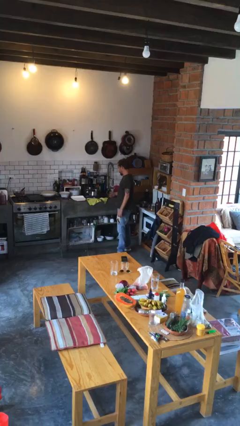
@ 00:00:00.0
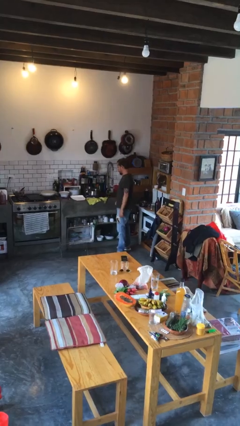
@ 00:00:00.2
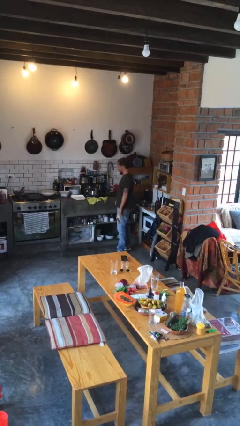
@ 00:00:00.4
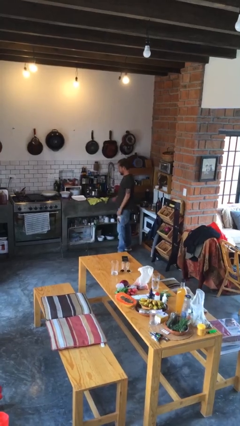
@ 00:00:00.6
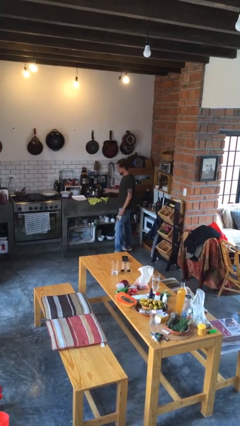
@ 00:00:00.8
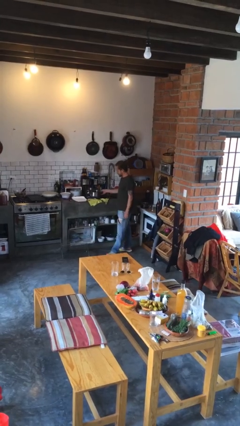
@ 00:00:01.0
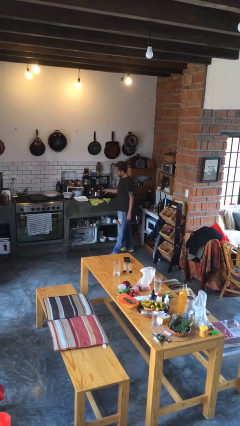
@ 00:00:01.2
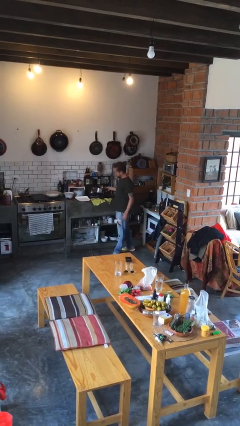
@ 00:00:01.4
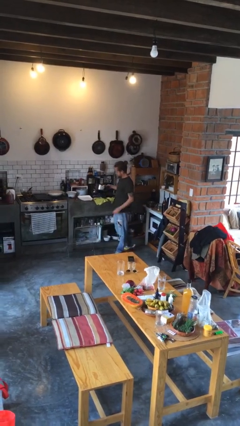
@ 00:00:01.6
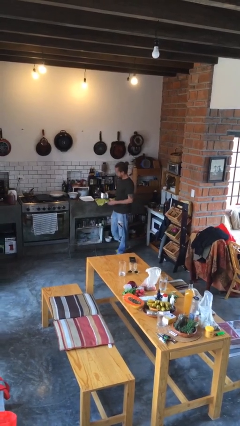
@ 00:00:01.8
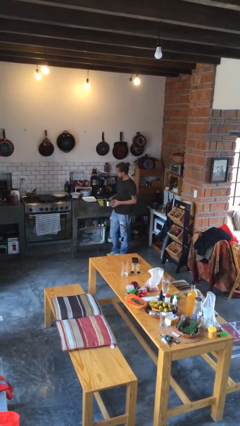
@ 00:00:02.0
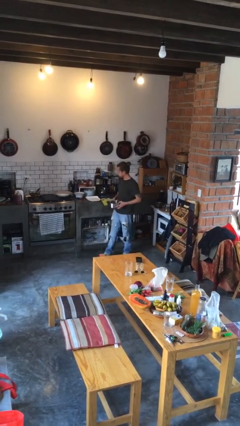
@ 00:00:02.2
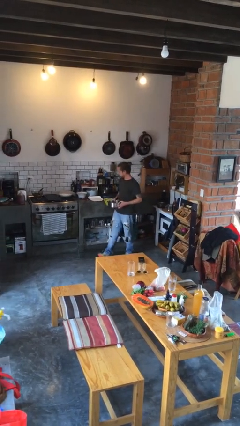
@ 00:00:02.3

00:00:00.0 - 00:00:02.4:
person picks up object from countertop

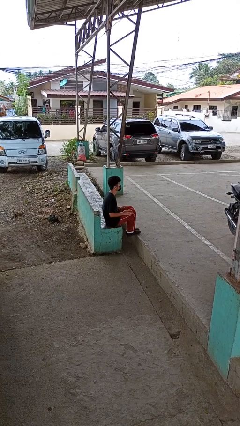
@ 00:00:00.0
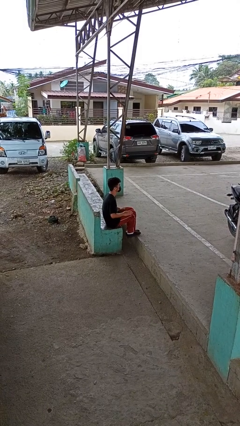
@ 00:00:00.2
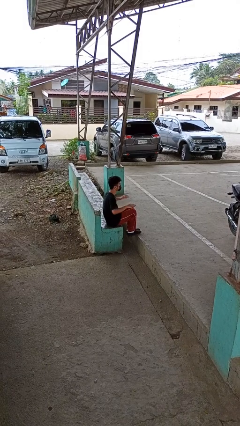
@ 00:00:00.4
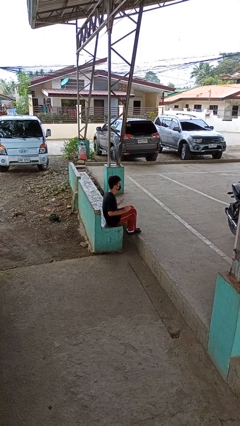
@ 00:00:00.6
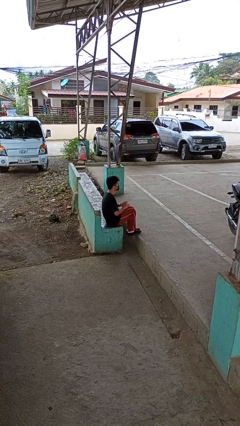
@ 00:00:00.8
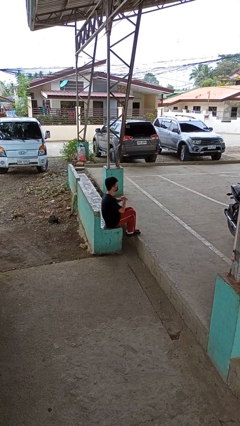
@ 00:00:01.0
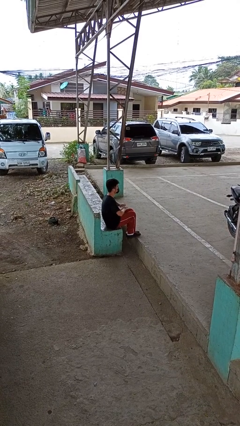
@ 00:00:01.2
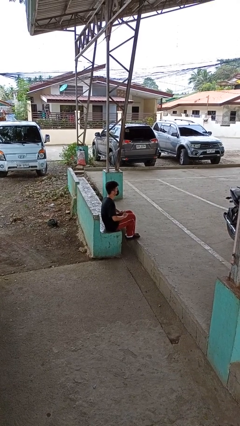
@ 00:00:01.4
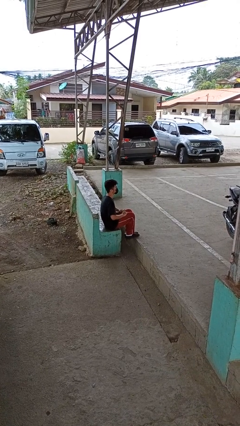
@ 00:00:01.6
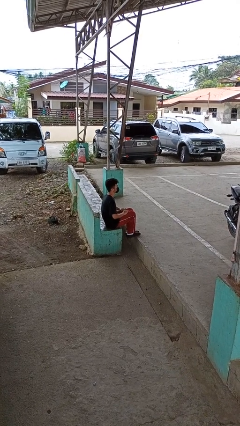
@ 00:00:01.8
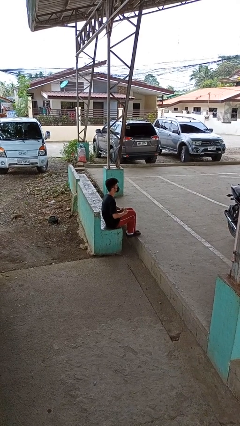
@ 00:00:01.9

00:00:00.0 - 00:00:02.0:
person slaps hands on thighs

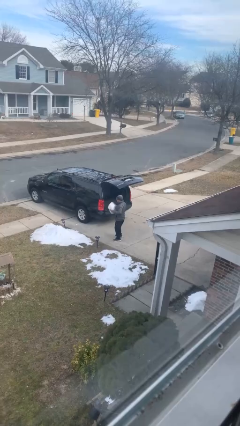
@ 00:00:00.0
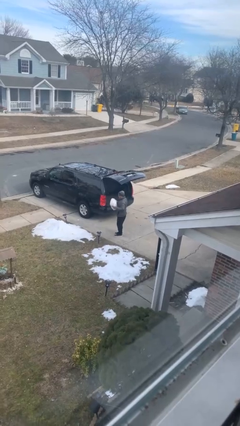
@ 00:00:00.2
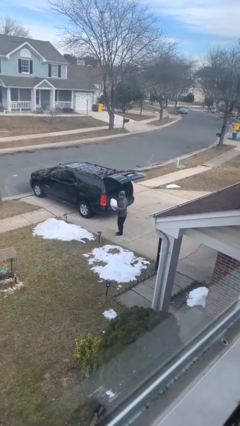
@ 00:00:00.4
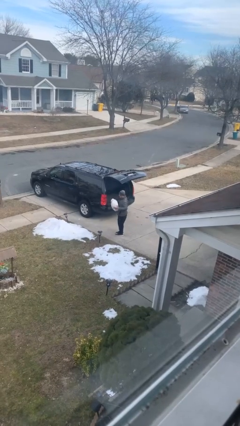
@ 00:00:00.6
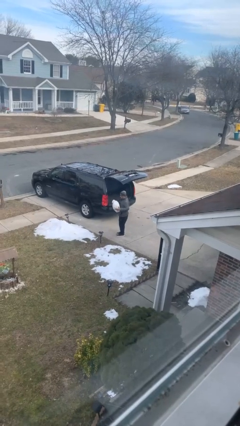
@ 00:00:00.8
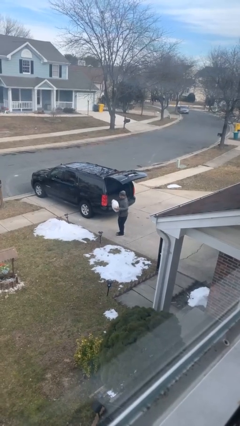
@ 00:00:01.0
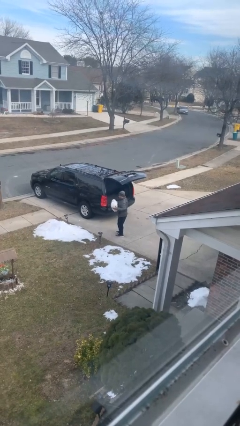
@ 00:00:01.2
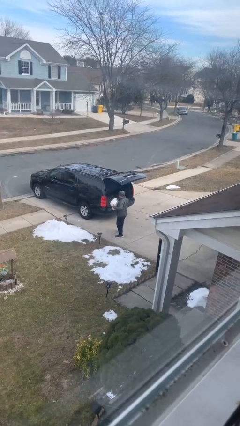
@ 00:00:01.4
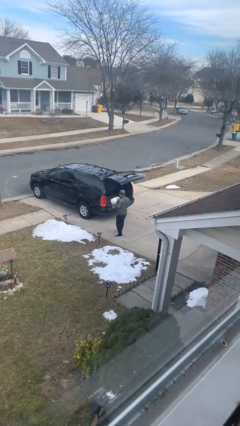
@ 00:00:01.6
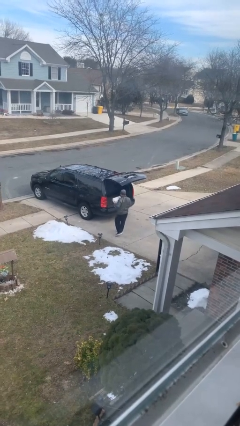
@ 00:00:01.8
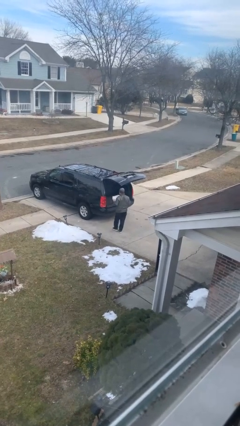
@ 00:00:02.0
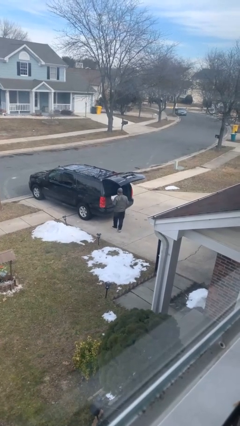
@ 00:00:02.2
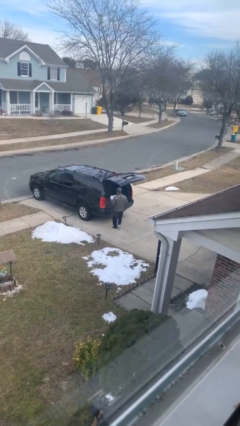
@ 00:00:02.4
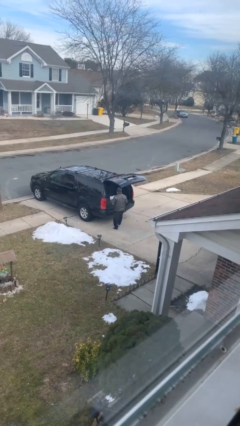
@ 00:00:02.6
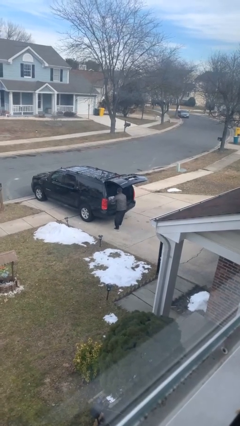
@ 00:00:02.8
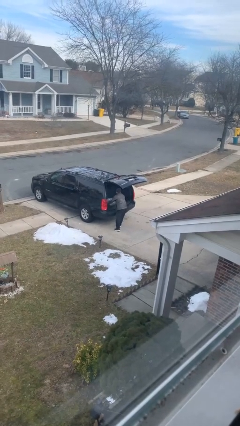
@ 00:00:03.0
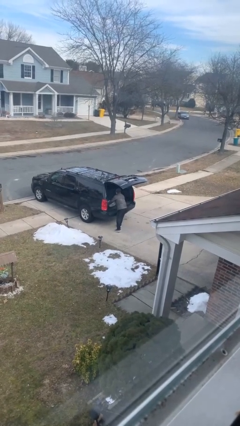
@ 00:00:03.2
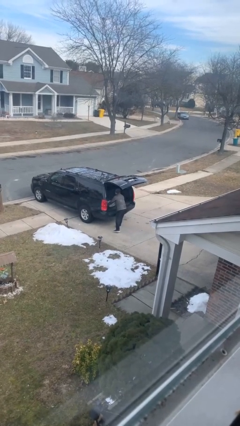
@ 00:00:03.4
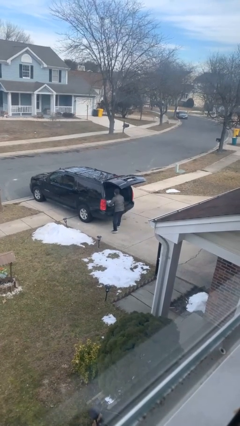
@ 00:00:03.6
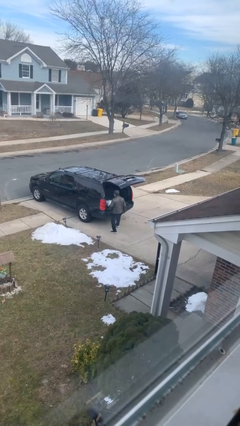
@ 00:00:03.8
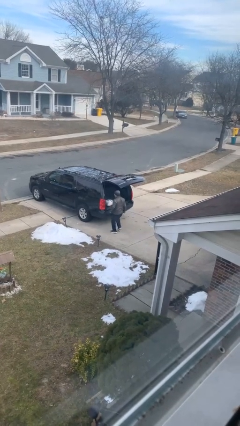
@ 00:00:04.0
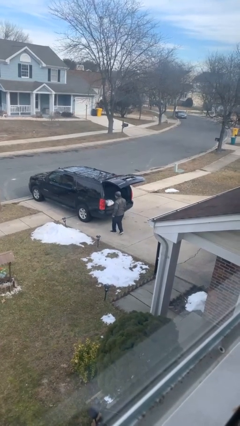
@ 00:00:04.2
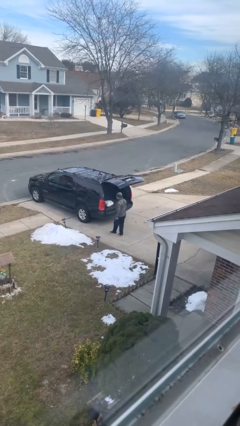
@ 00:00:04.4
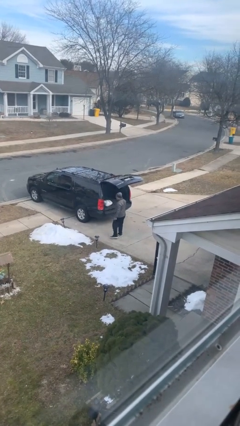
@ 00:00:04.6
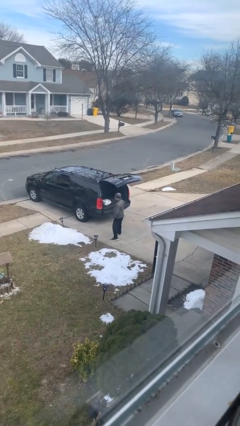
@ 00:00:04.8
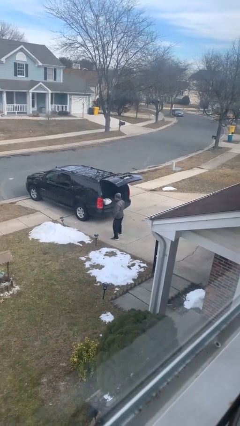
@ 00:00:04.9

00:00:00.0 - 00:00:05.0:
person loads car

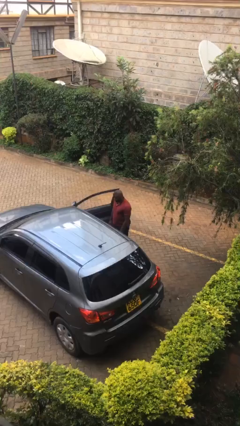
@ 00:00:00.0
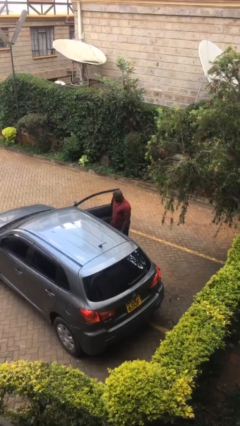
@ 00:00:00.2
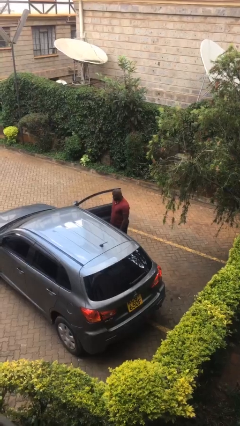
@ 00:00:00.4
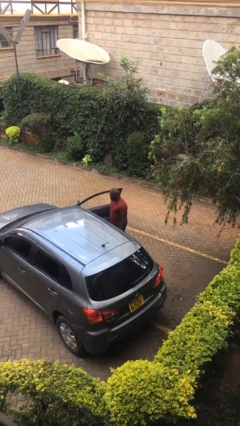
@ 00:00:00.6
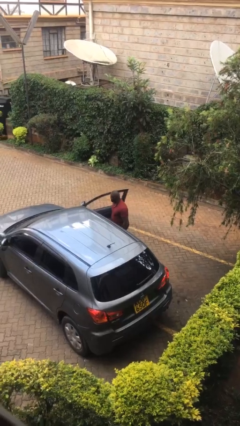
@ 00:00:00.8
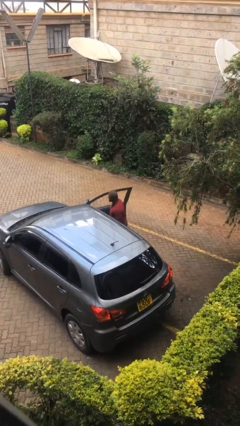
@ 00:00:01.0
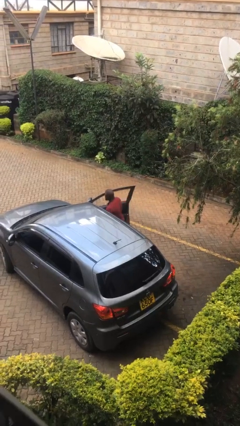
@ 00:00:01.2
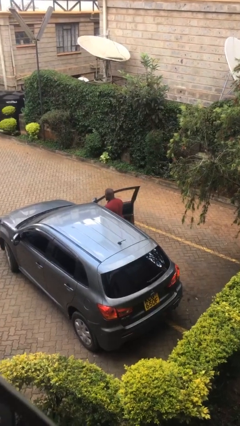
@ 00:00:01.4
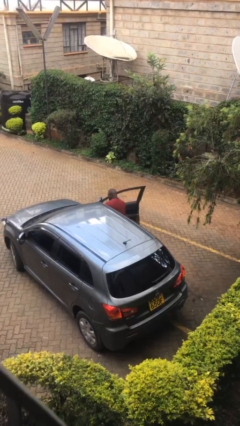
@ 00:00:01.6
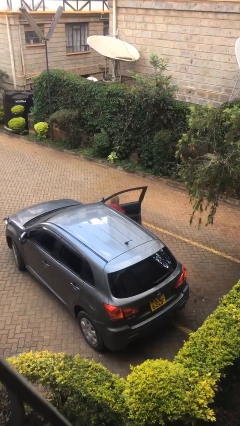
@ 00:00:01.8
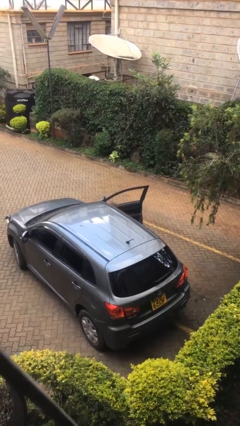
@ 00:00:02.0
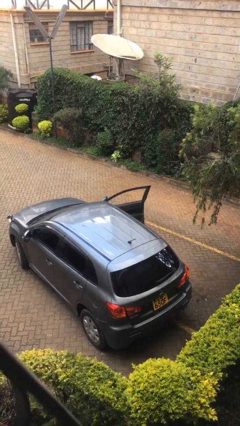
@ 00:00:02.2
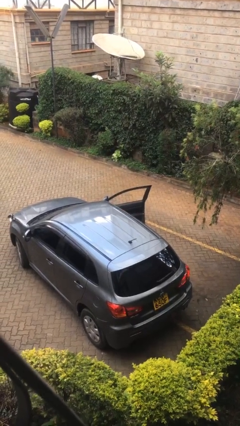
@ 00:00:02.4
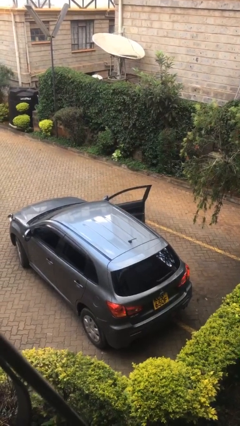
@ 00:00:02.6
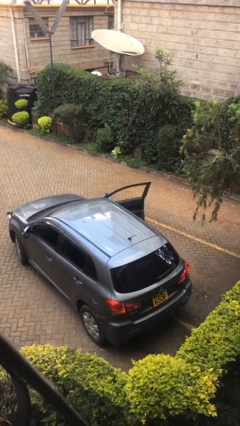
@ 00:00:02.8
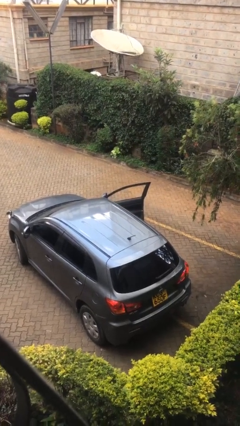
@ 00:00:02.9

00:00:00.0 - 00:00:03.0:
person enters car

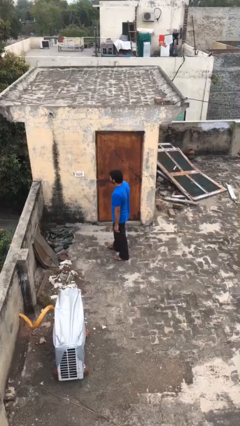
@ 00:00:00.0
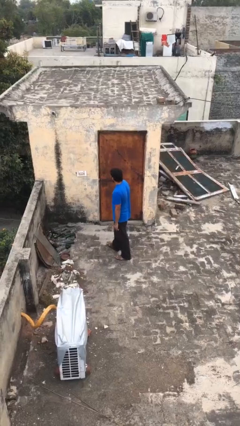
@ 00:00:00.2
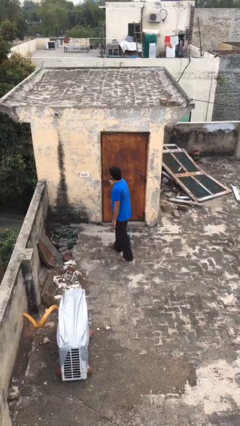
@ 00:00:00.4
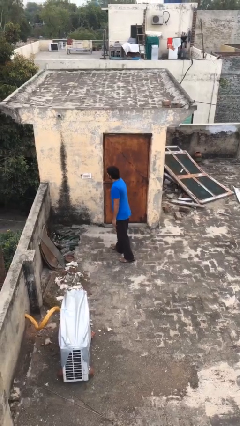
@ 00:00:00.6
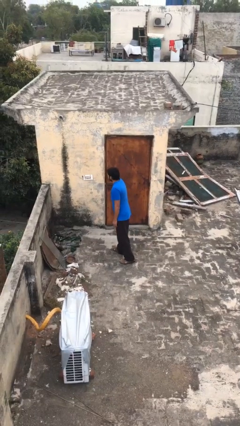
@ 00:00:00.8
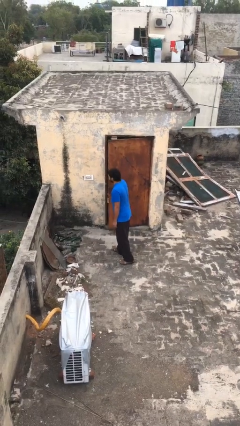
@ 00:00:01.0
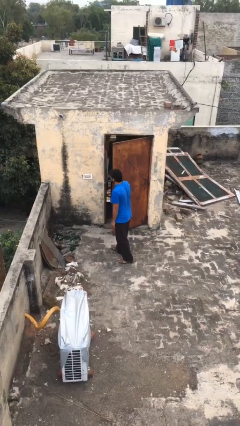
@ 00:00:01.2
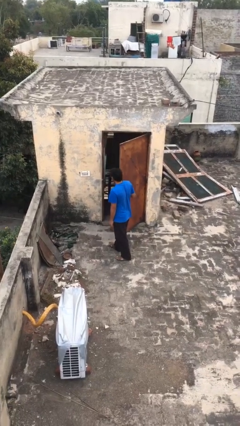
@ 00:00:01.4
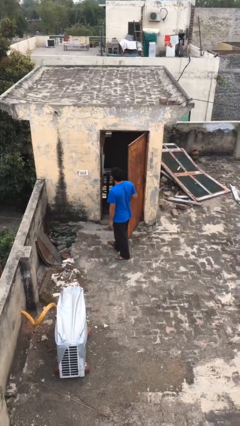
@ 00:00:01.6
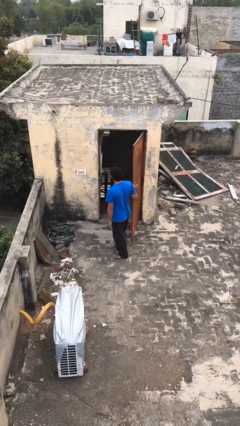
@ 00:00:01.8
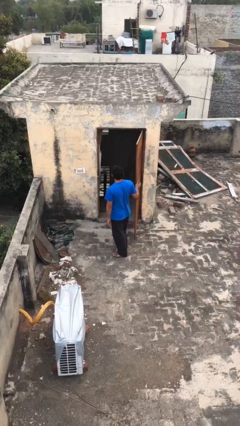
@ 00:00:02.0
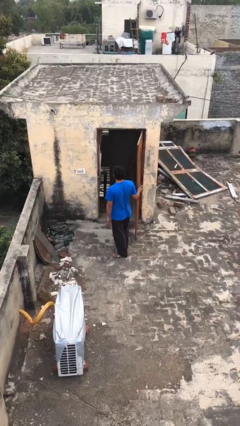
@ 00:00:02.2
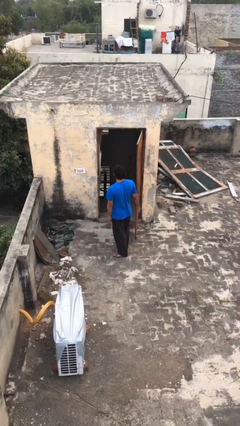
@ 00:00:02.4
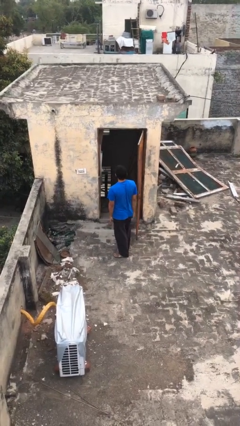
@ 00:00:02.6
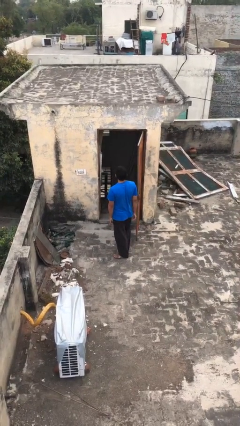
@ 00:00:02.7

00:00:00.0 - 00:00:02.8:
person opens facility door

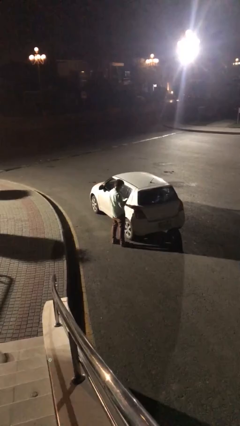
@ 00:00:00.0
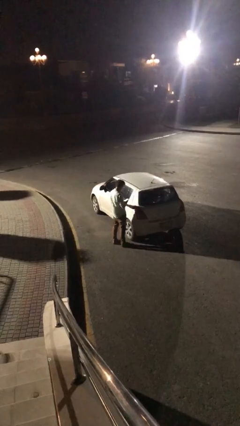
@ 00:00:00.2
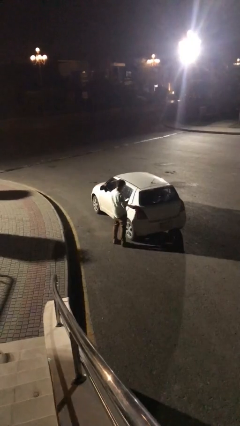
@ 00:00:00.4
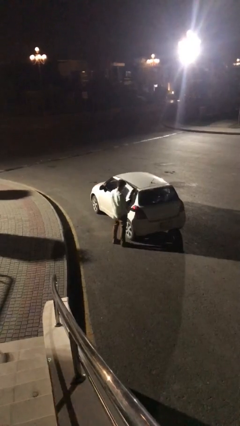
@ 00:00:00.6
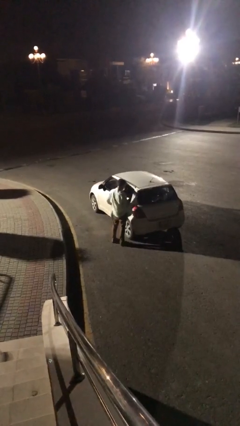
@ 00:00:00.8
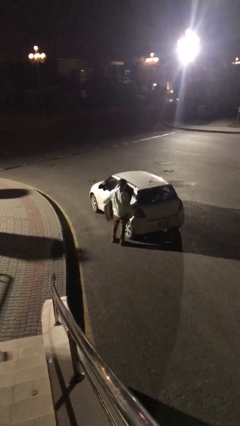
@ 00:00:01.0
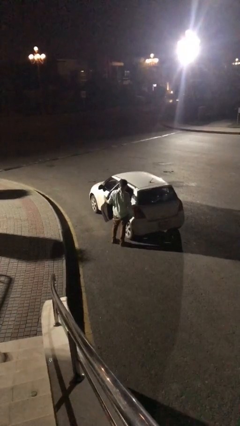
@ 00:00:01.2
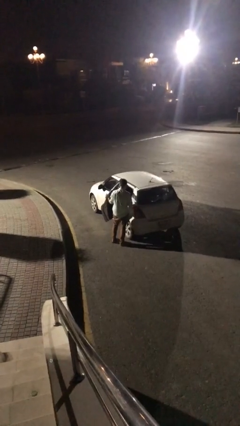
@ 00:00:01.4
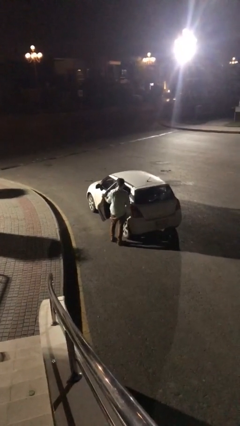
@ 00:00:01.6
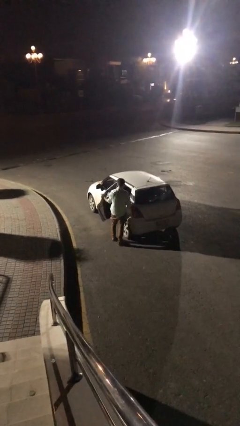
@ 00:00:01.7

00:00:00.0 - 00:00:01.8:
person opens car door

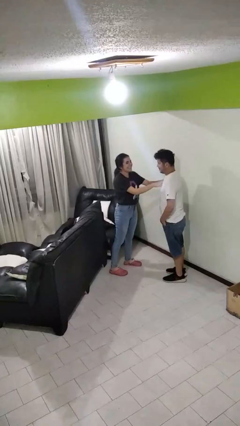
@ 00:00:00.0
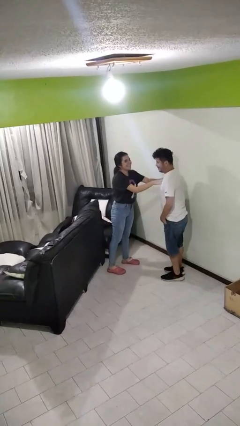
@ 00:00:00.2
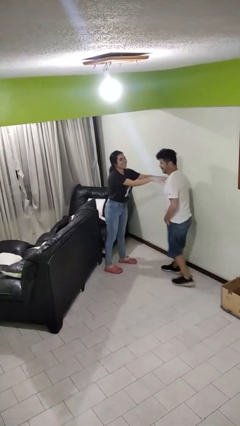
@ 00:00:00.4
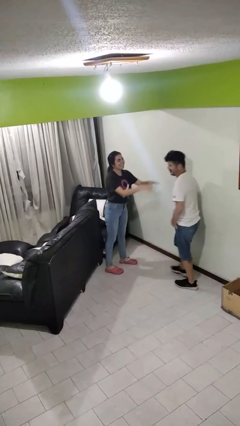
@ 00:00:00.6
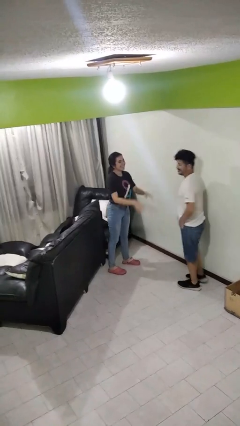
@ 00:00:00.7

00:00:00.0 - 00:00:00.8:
person shoves person
